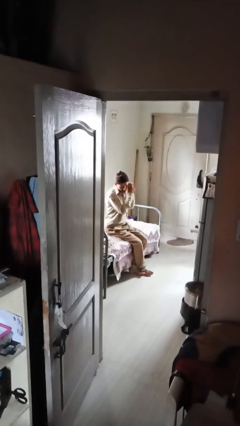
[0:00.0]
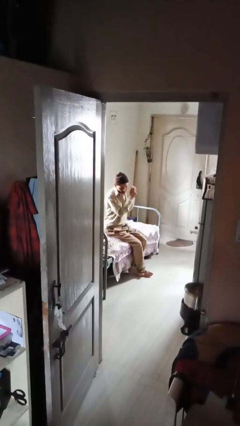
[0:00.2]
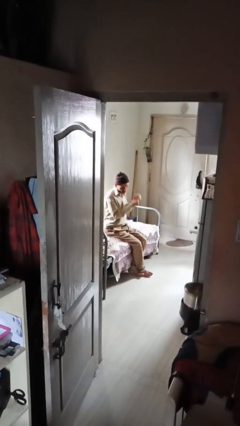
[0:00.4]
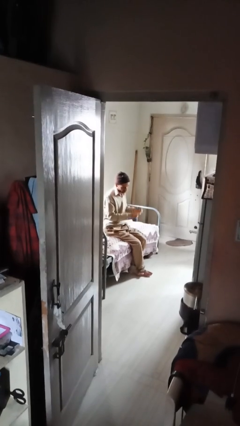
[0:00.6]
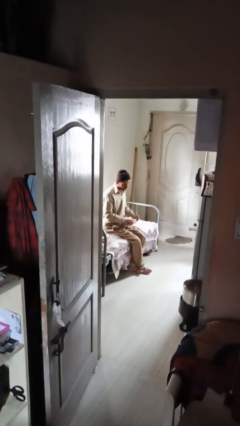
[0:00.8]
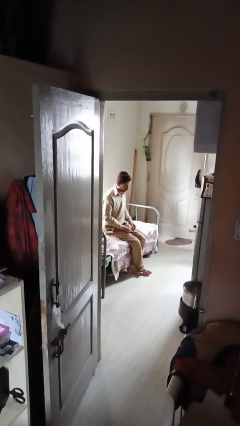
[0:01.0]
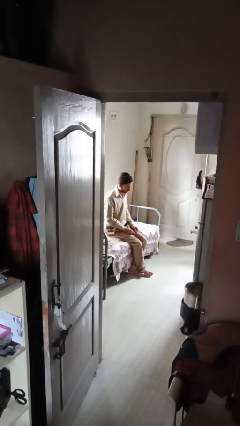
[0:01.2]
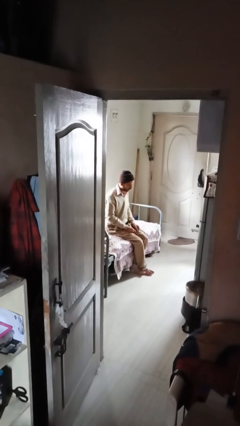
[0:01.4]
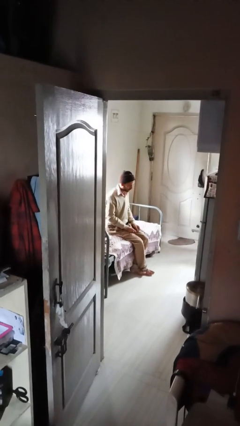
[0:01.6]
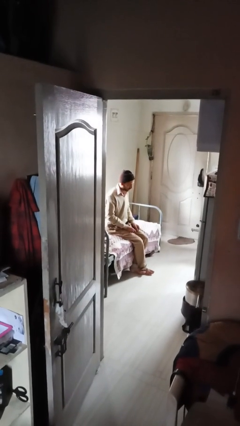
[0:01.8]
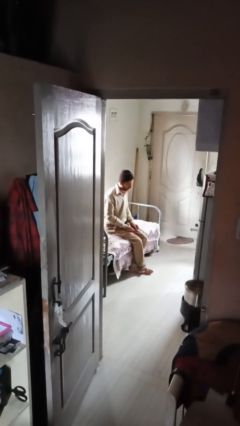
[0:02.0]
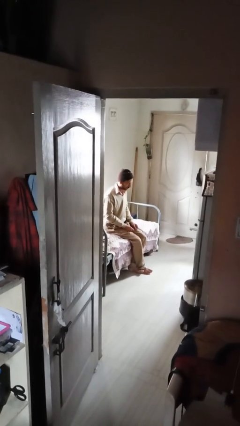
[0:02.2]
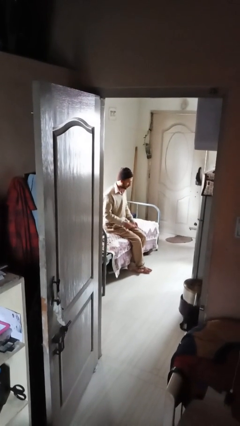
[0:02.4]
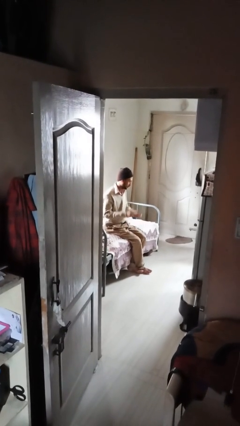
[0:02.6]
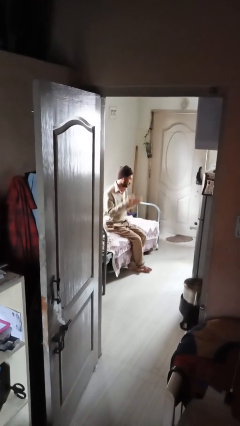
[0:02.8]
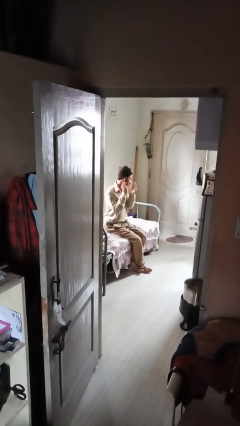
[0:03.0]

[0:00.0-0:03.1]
person takes off earrings

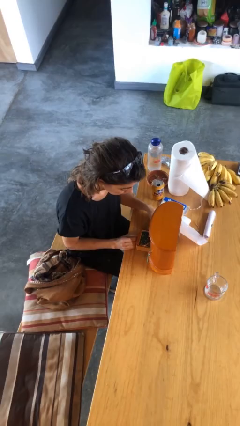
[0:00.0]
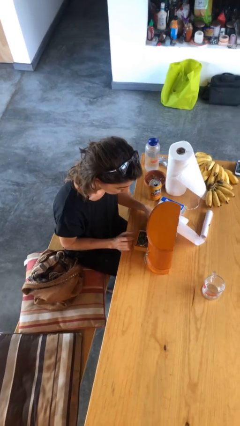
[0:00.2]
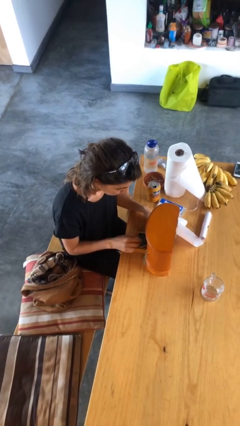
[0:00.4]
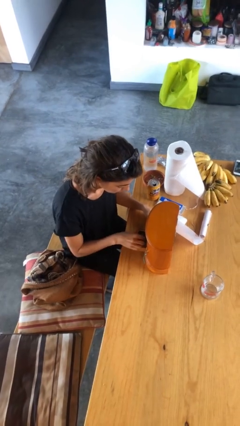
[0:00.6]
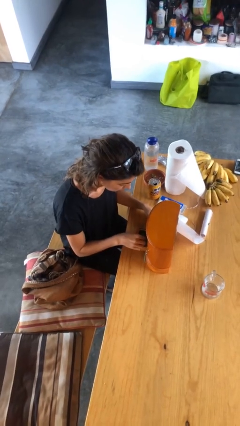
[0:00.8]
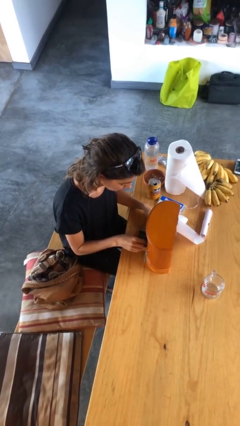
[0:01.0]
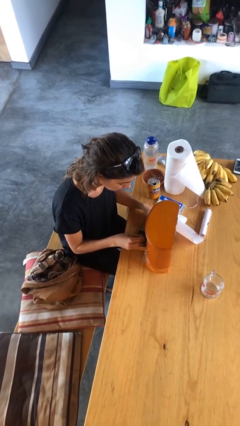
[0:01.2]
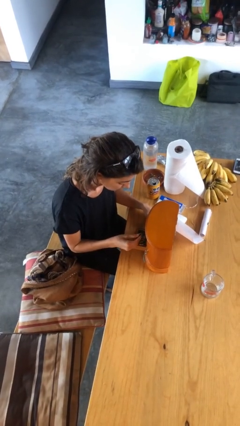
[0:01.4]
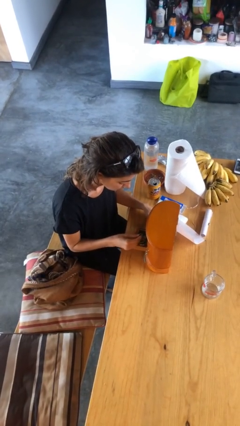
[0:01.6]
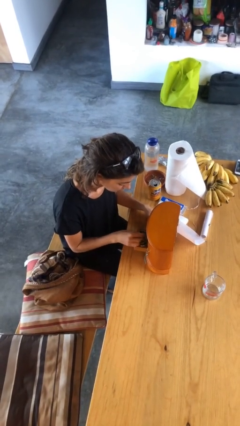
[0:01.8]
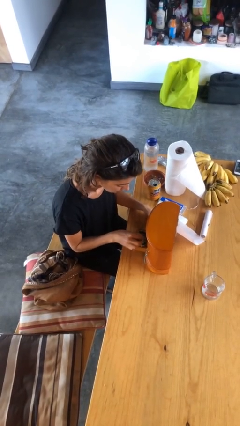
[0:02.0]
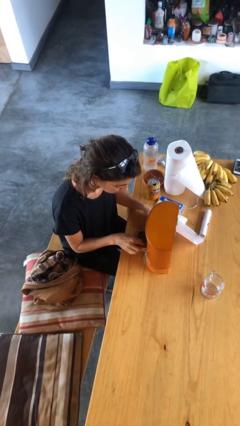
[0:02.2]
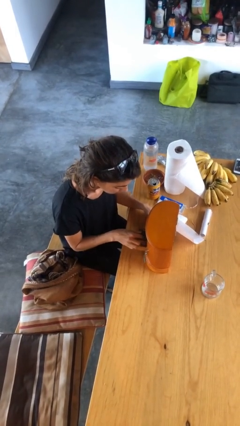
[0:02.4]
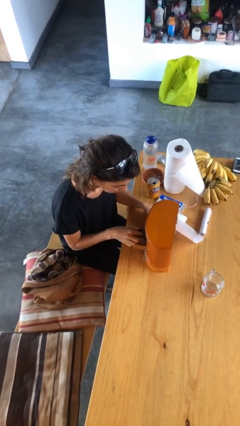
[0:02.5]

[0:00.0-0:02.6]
person searches jewelry box

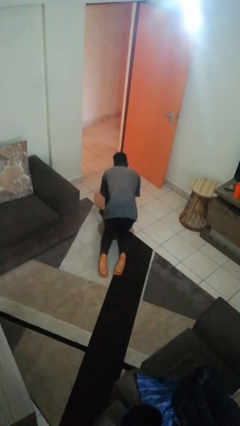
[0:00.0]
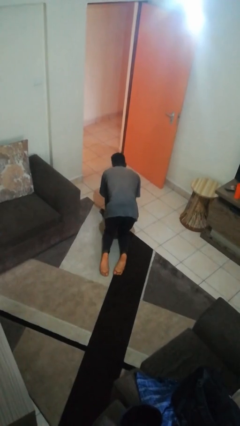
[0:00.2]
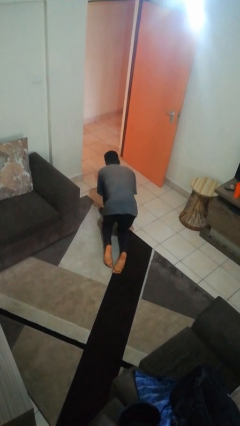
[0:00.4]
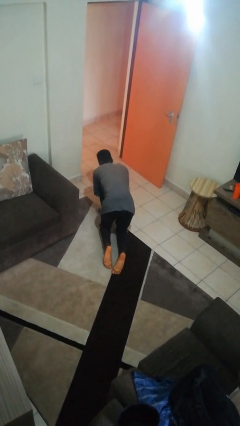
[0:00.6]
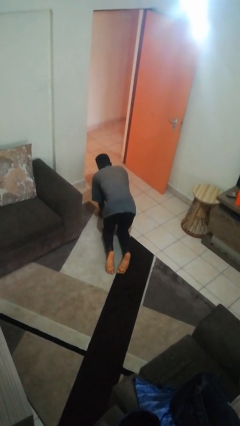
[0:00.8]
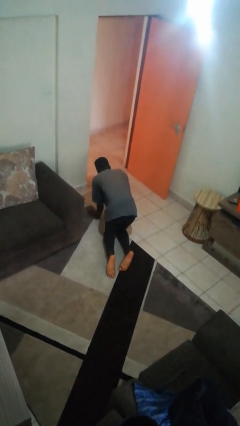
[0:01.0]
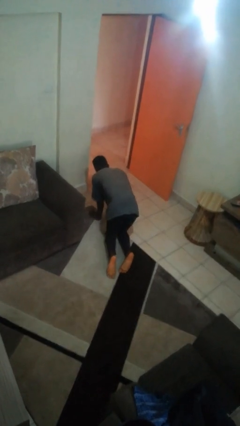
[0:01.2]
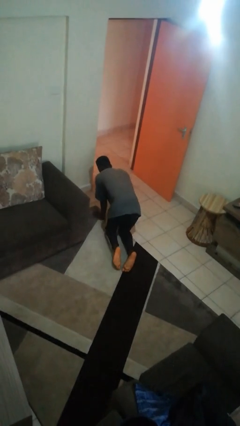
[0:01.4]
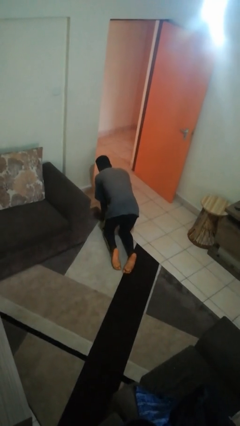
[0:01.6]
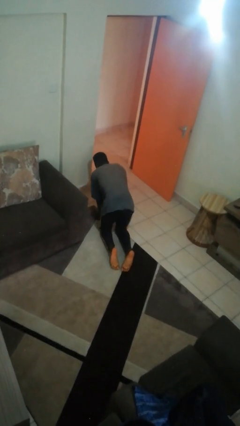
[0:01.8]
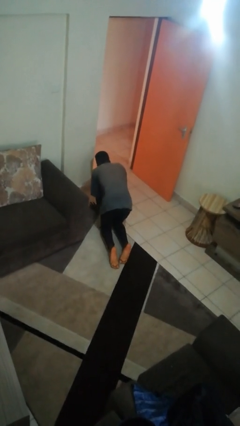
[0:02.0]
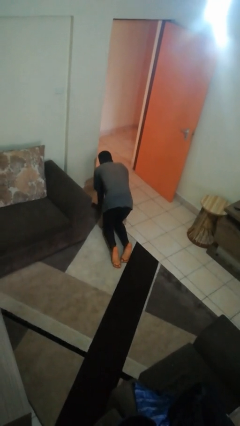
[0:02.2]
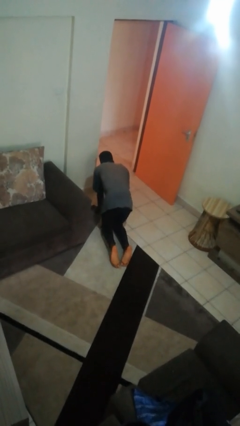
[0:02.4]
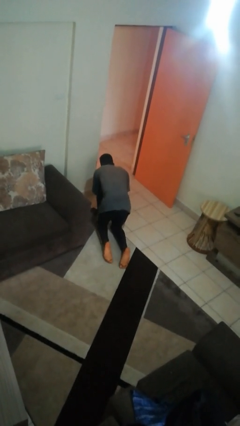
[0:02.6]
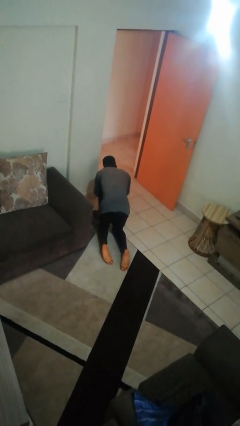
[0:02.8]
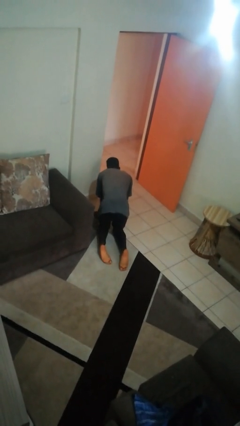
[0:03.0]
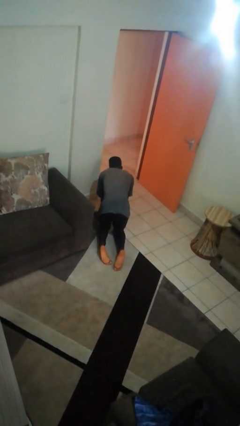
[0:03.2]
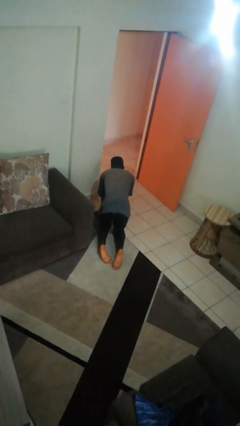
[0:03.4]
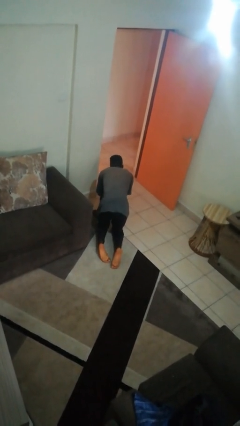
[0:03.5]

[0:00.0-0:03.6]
person crawls

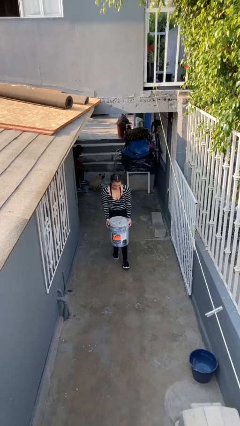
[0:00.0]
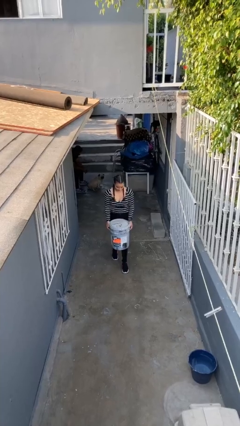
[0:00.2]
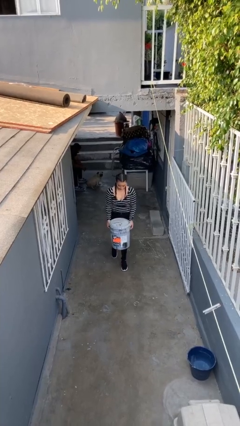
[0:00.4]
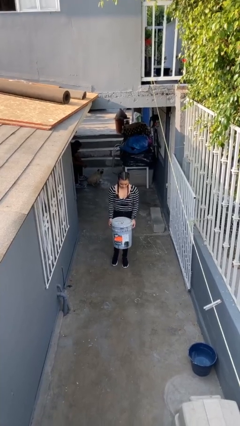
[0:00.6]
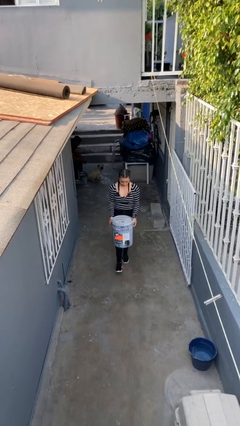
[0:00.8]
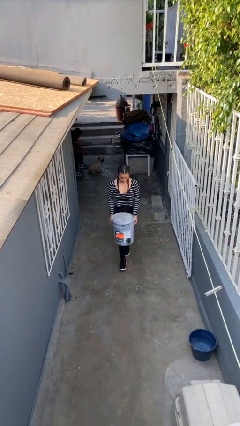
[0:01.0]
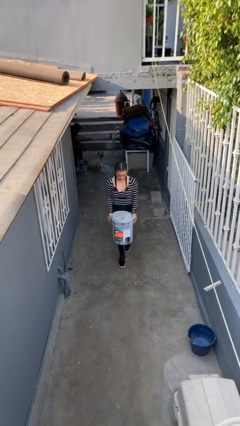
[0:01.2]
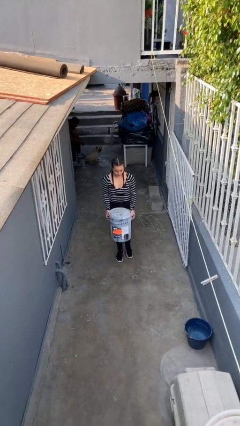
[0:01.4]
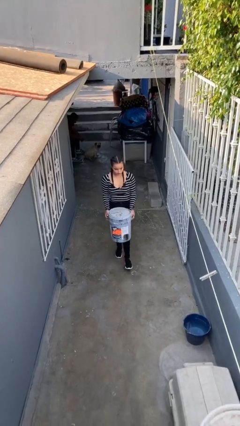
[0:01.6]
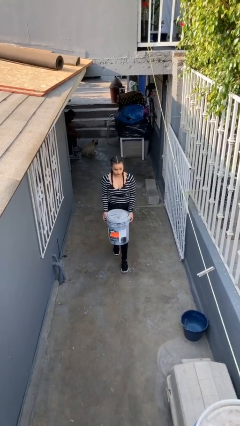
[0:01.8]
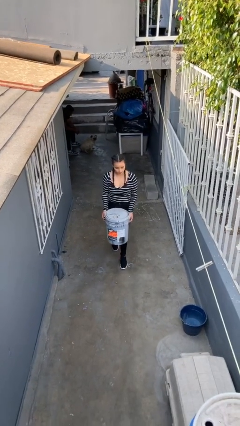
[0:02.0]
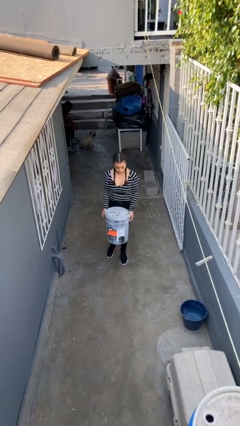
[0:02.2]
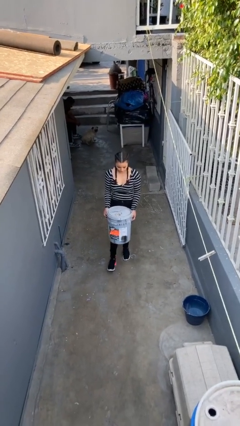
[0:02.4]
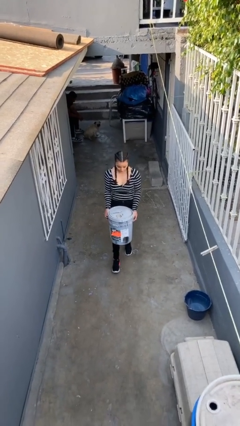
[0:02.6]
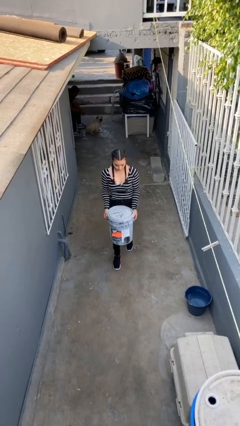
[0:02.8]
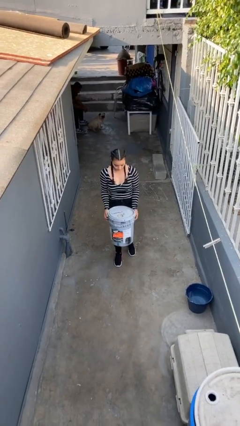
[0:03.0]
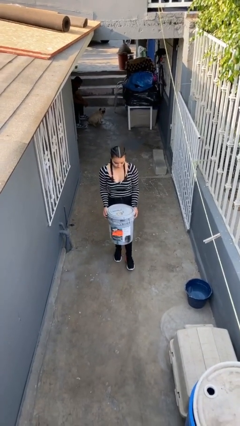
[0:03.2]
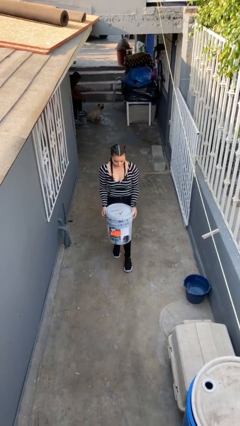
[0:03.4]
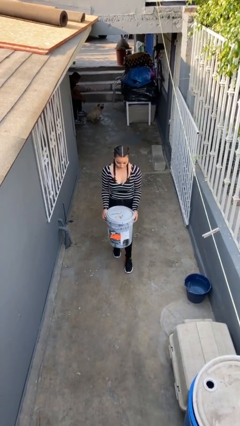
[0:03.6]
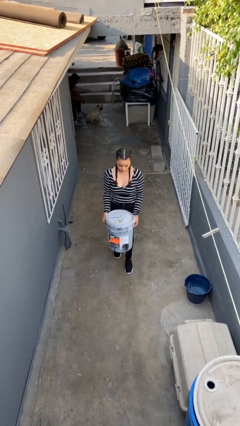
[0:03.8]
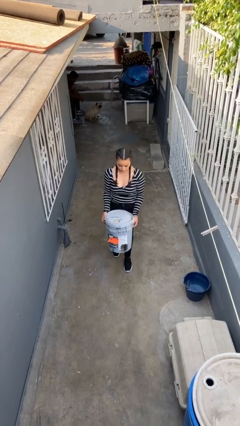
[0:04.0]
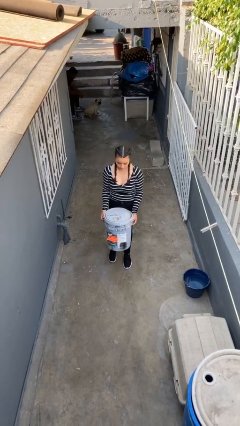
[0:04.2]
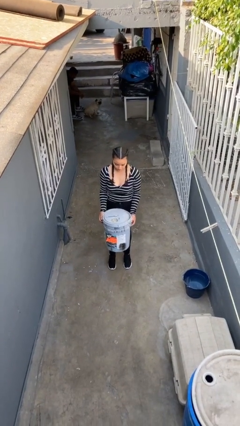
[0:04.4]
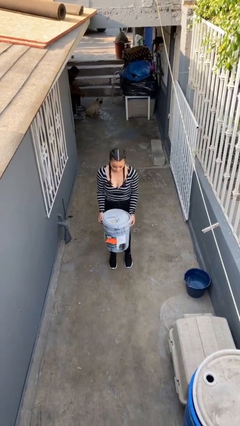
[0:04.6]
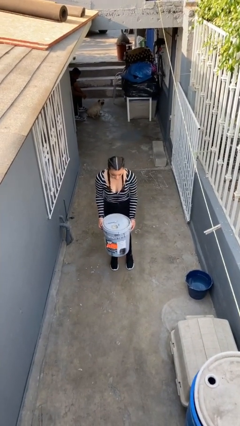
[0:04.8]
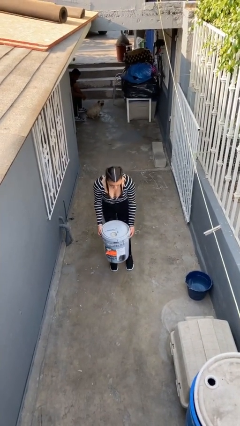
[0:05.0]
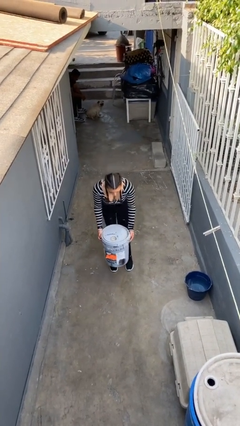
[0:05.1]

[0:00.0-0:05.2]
person carries heavy object

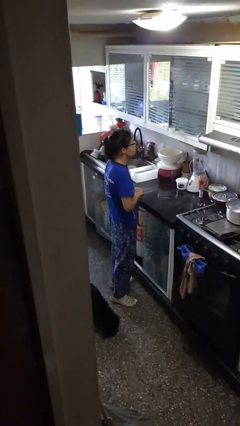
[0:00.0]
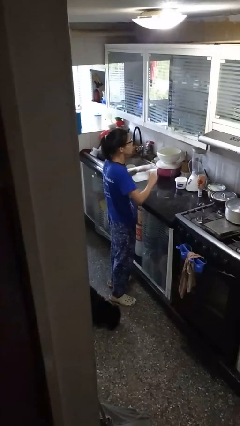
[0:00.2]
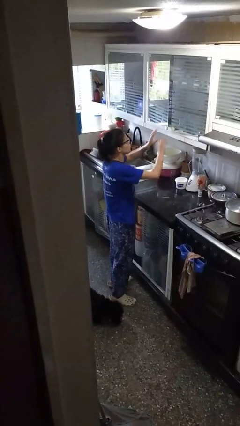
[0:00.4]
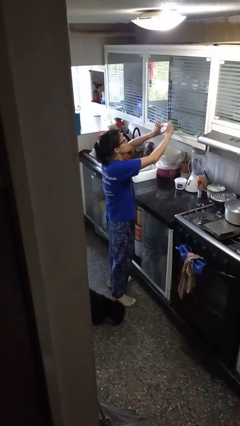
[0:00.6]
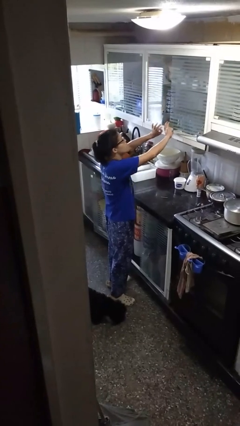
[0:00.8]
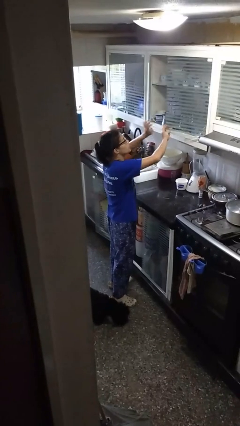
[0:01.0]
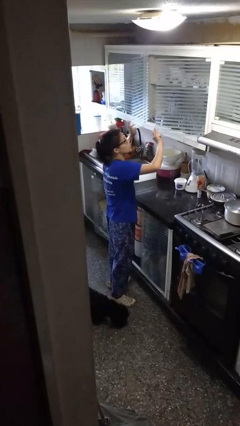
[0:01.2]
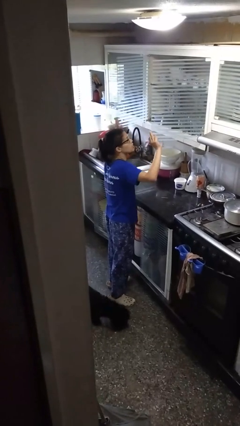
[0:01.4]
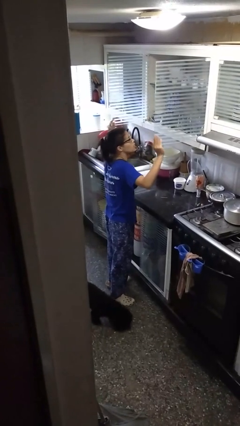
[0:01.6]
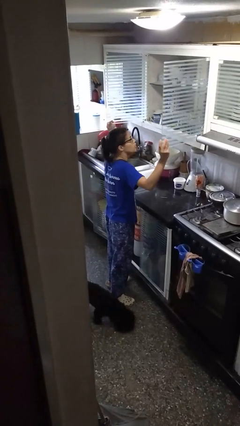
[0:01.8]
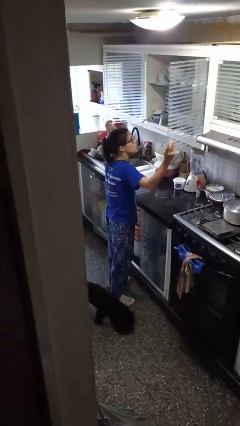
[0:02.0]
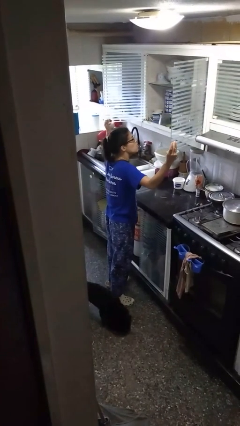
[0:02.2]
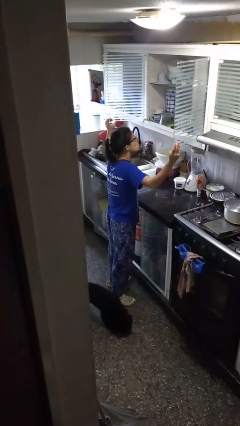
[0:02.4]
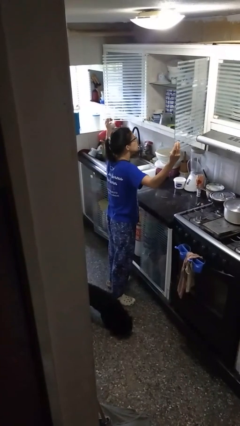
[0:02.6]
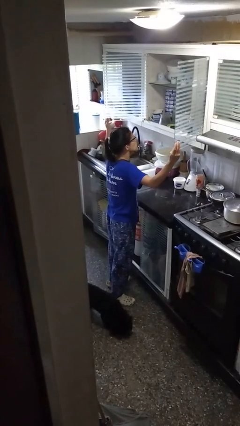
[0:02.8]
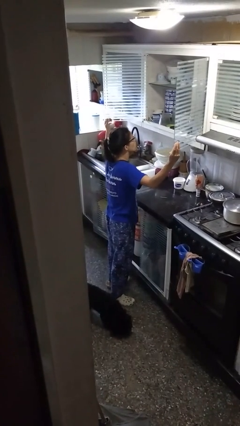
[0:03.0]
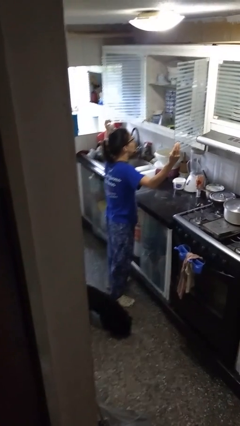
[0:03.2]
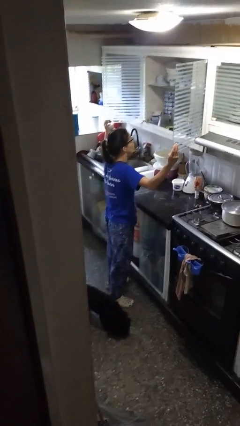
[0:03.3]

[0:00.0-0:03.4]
person opens cabinet
